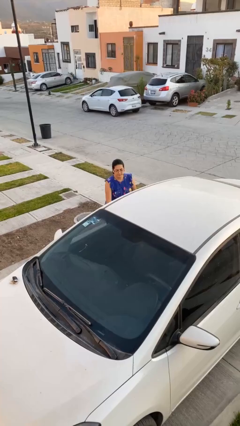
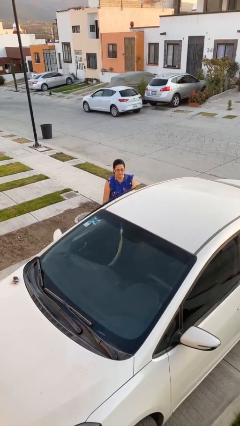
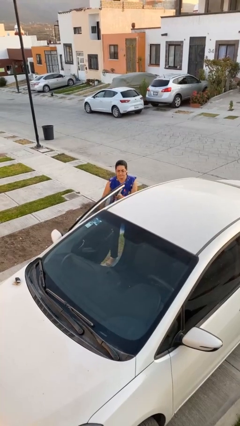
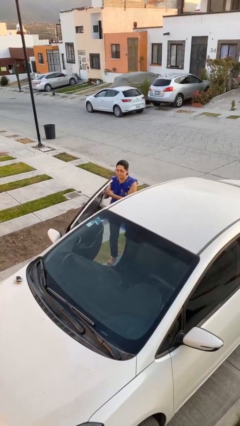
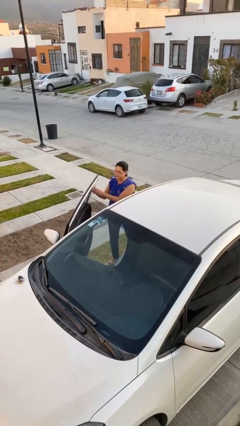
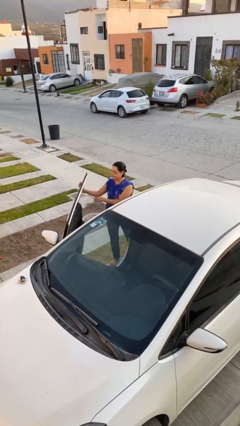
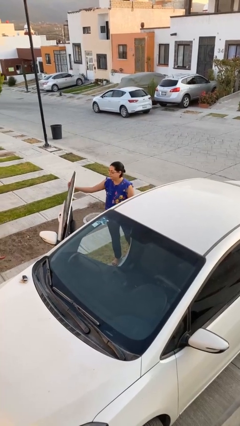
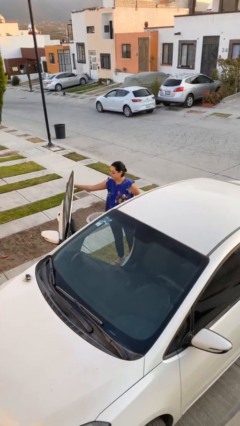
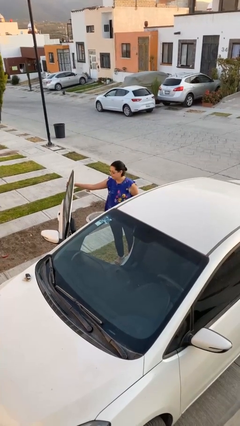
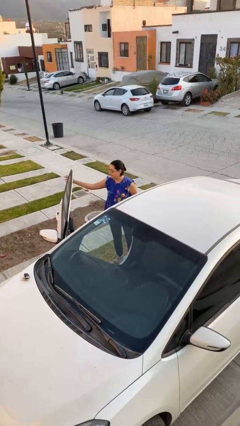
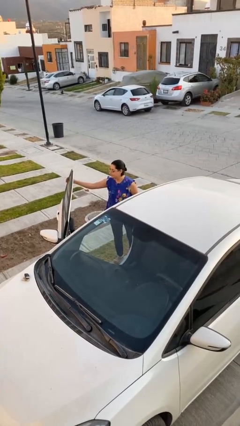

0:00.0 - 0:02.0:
person opens car door

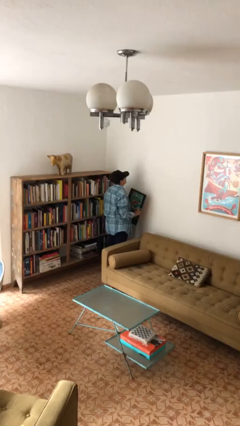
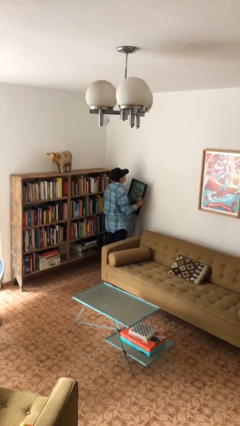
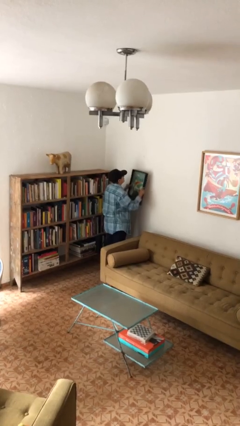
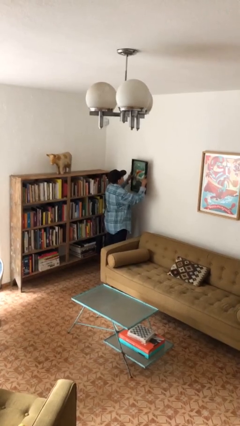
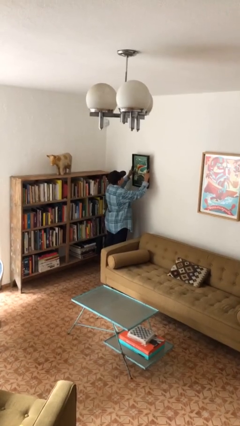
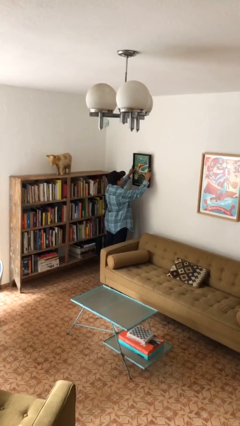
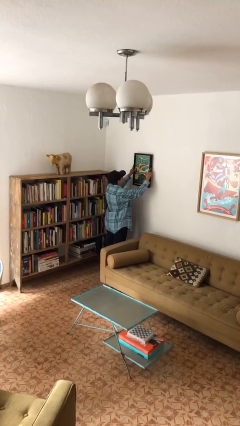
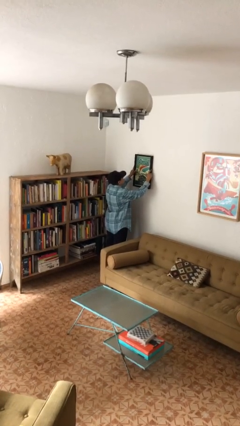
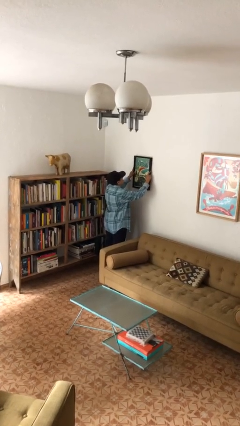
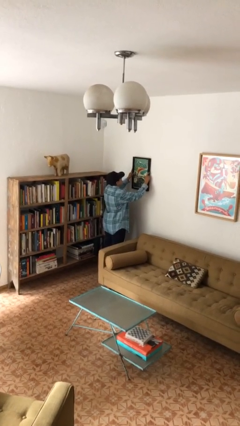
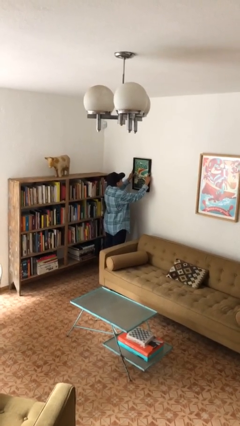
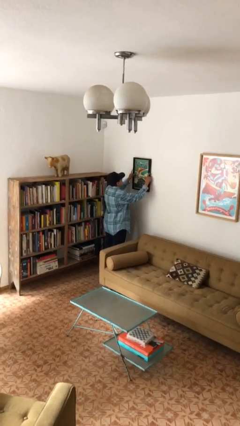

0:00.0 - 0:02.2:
person puts up picture frame

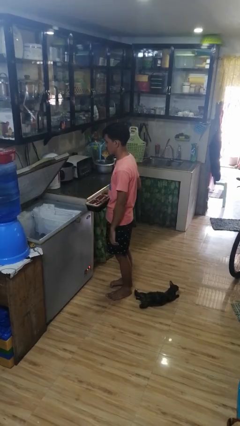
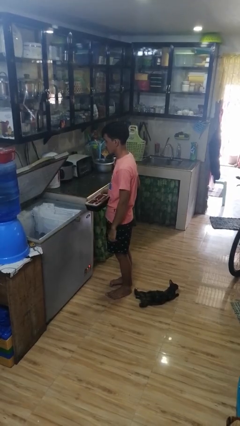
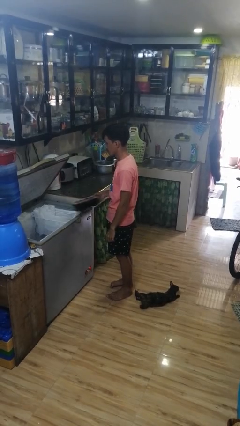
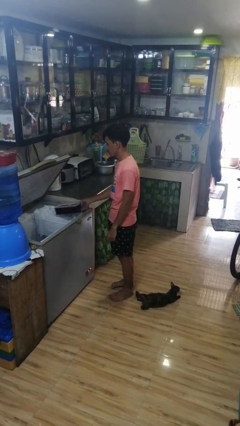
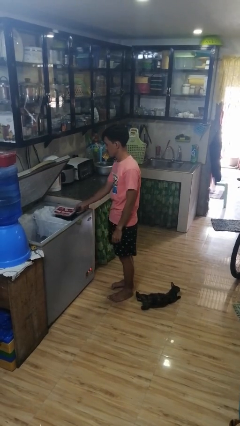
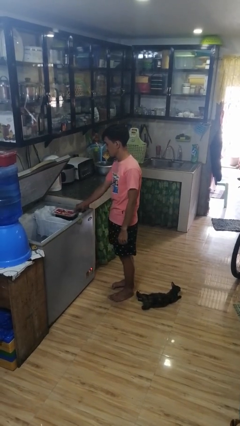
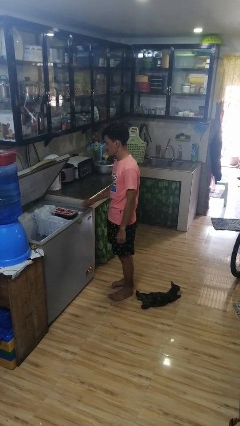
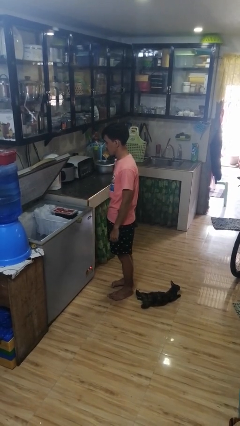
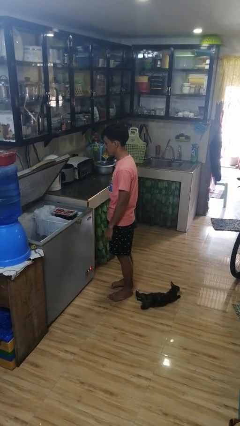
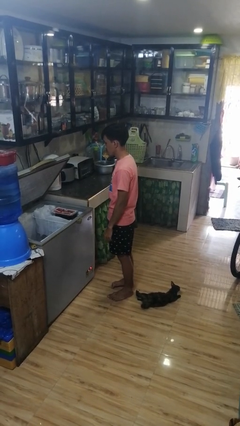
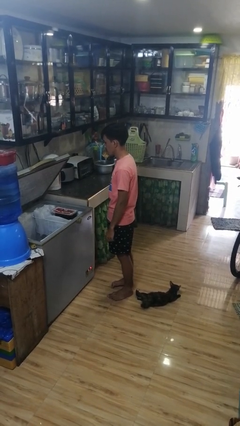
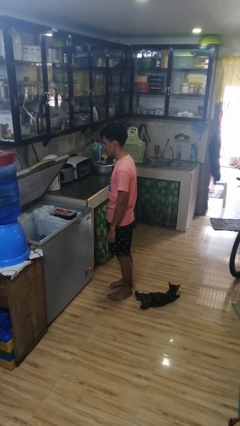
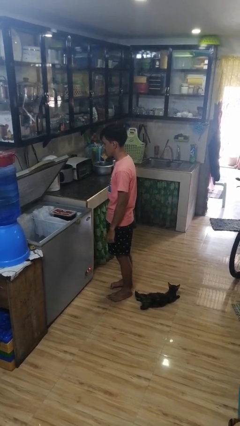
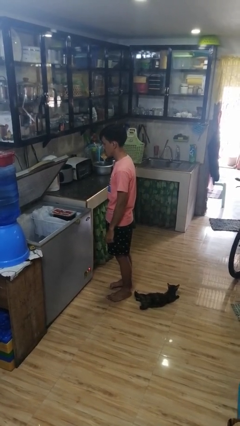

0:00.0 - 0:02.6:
person puts object into refrigerator

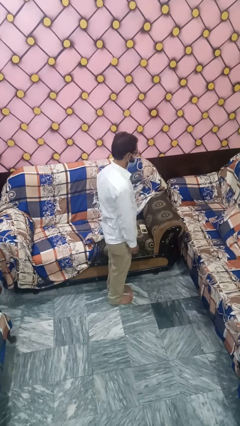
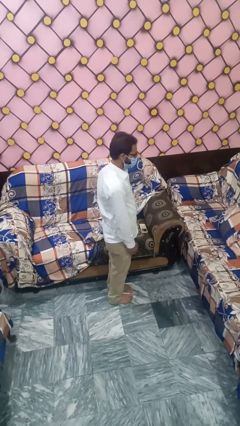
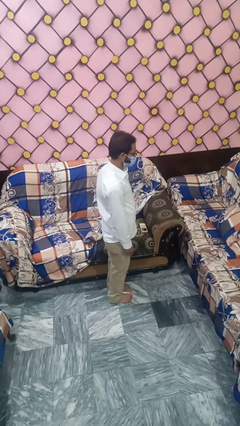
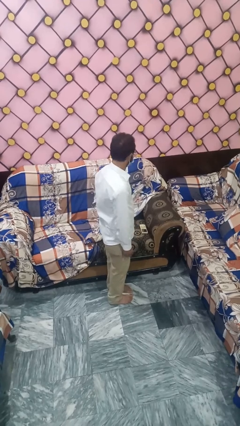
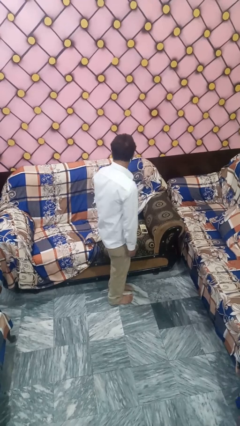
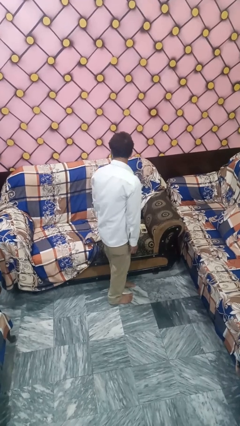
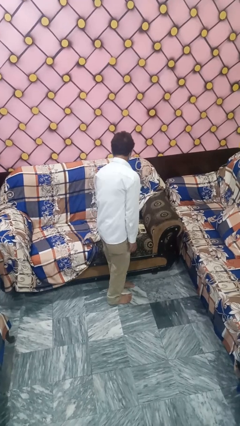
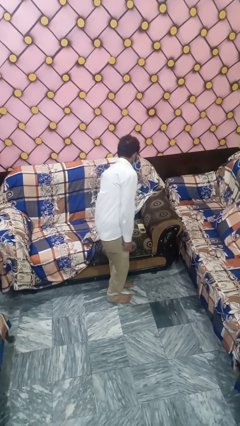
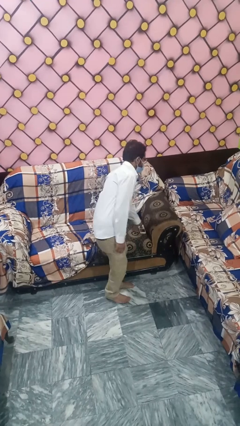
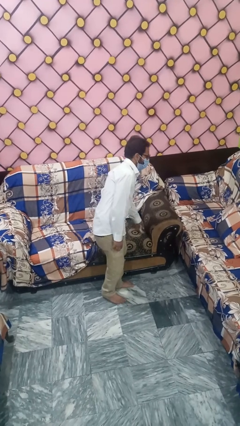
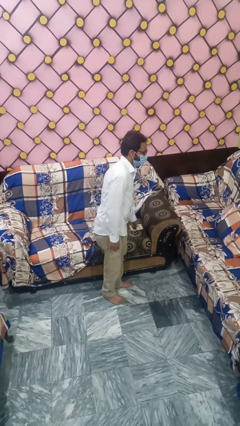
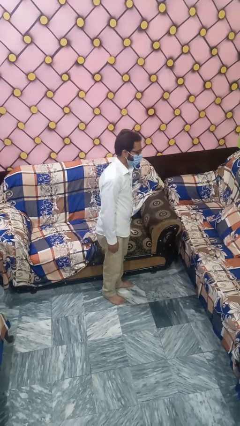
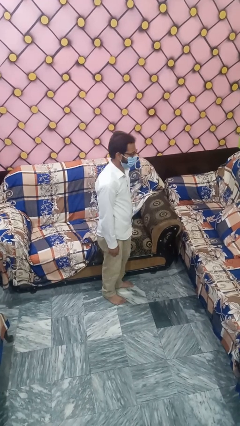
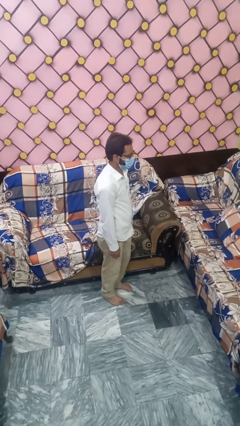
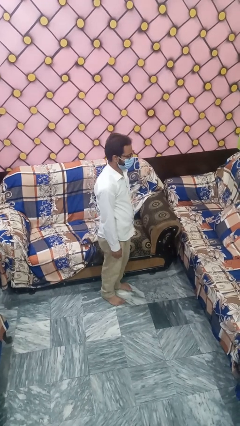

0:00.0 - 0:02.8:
person searches under couch

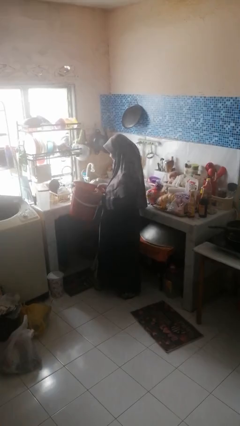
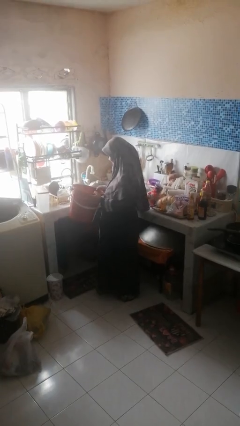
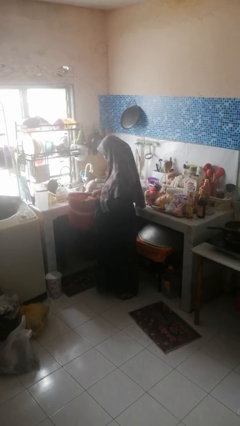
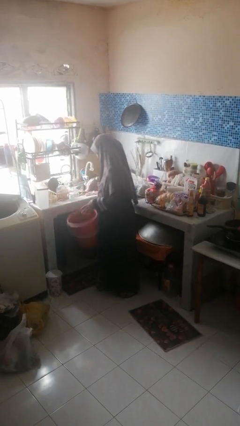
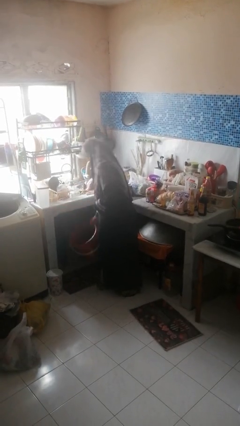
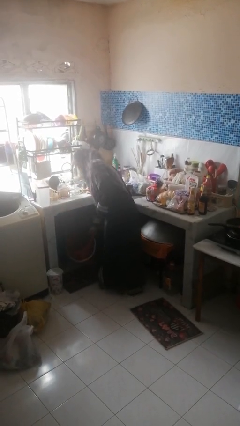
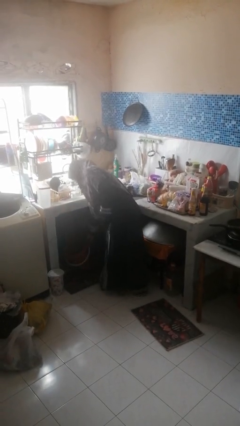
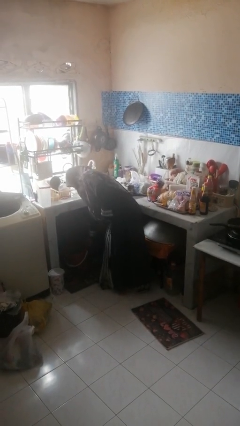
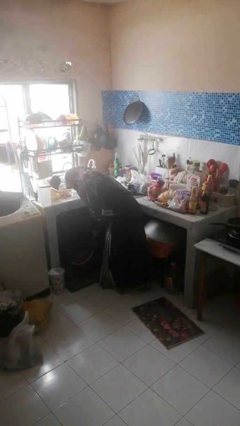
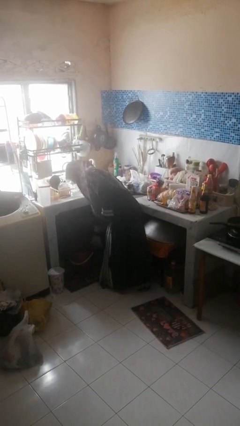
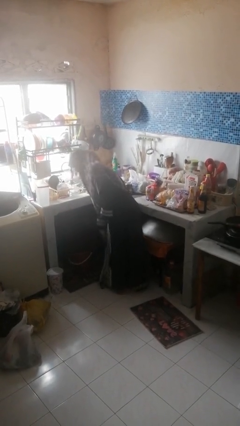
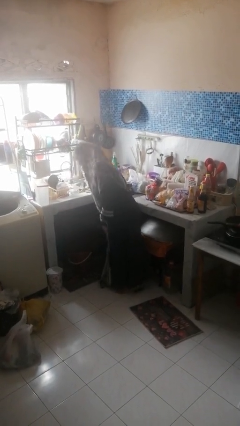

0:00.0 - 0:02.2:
person puts down object into cabinet

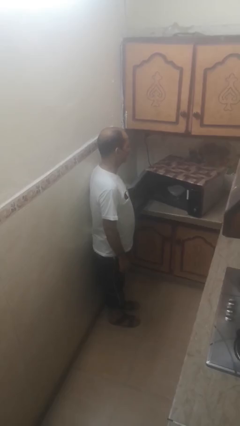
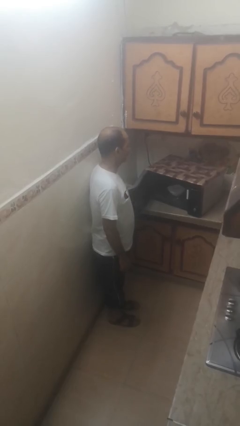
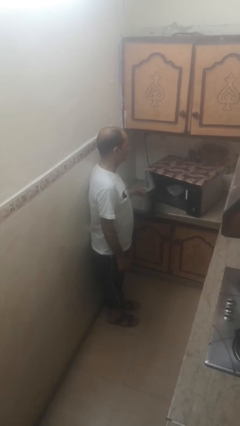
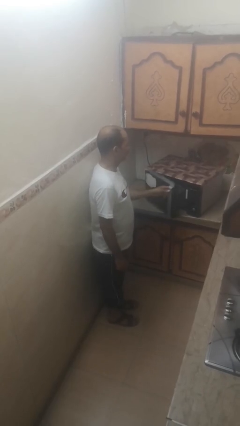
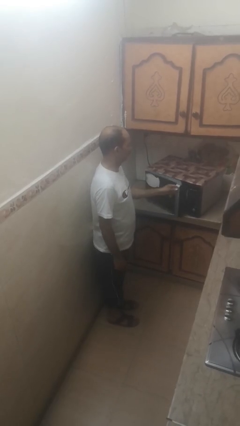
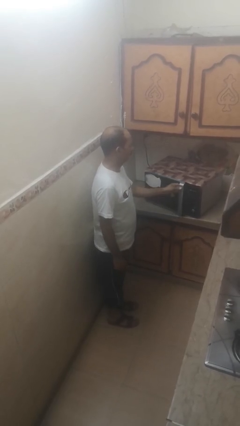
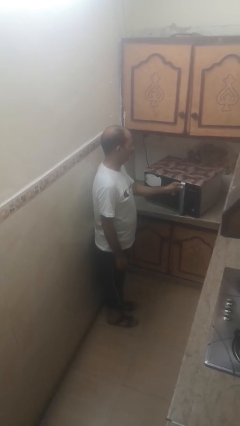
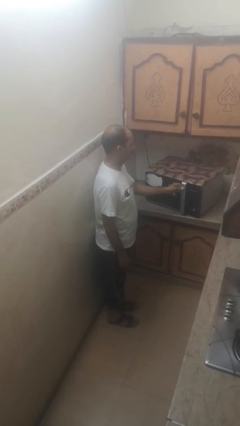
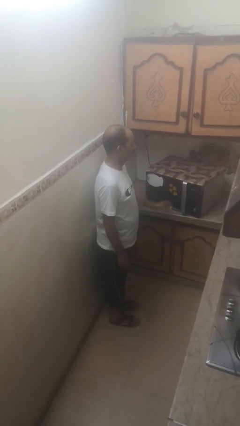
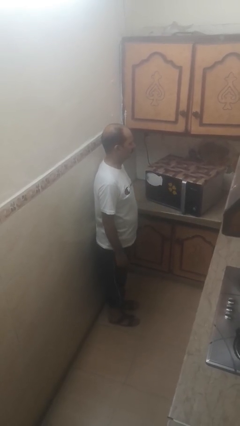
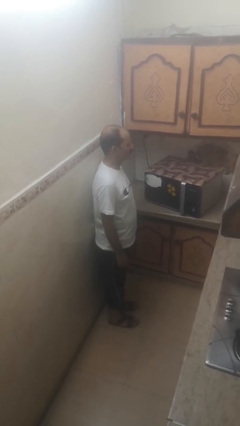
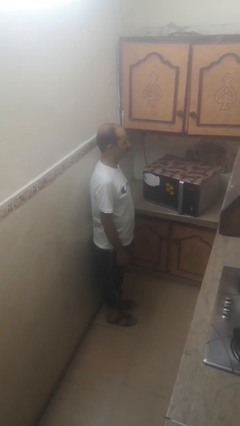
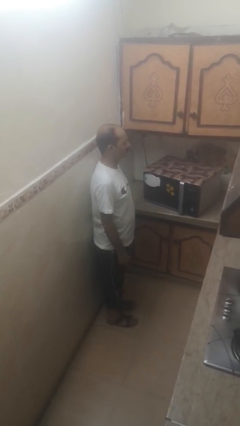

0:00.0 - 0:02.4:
person closes microwave

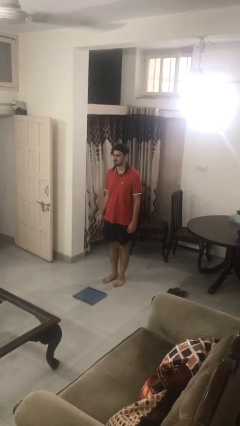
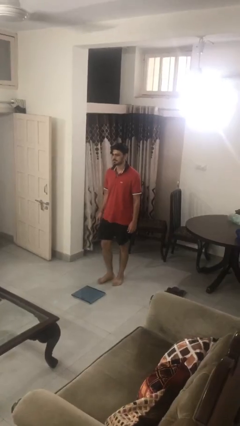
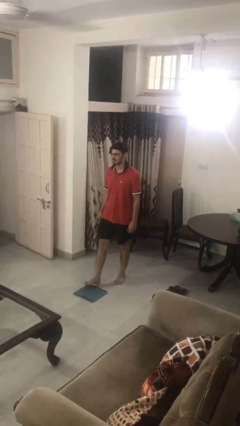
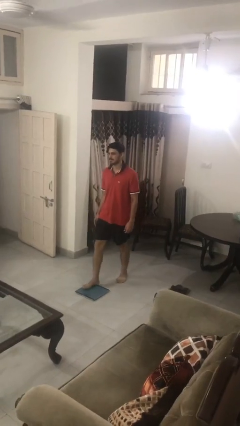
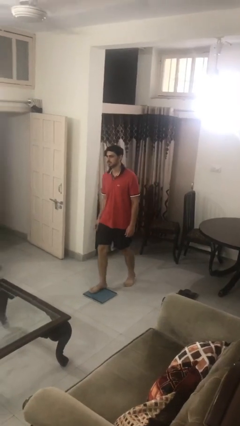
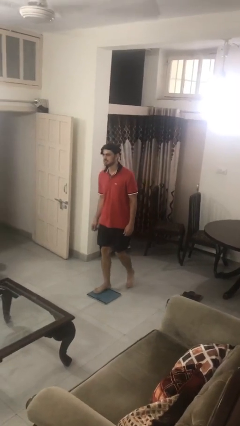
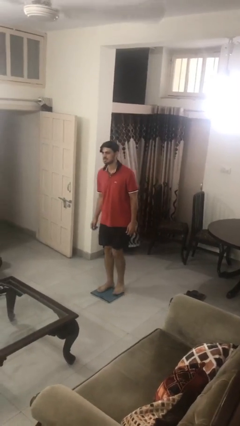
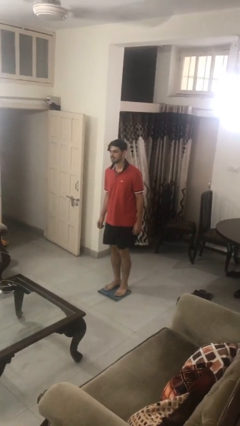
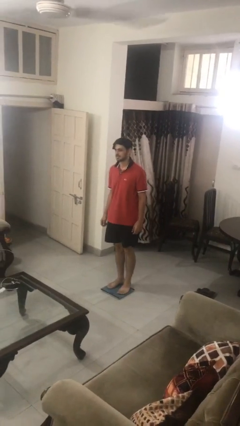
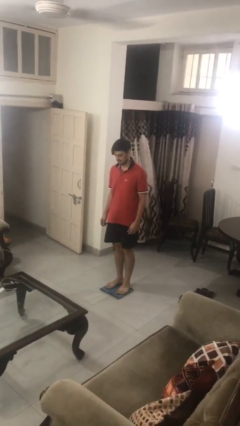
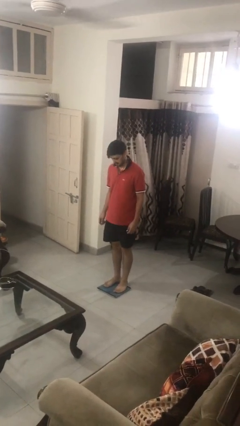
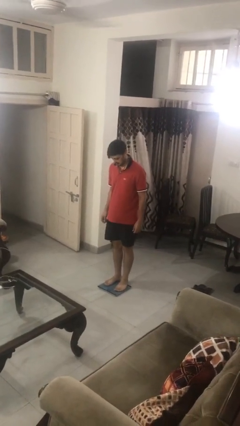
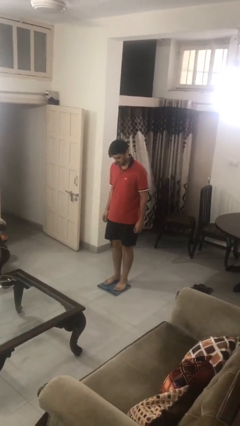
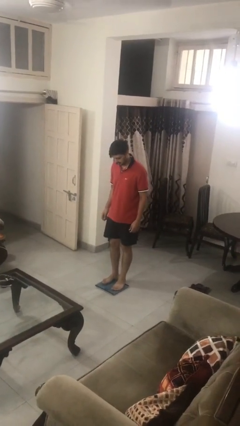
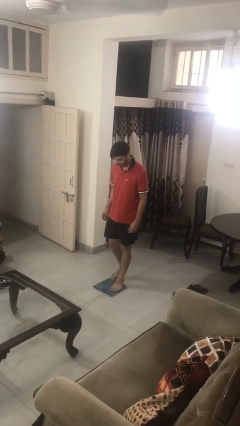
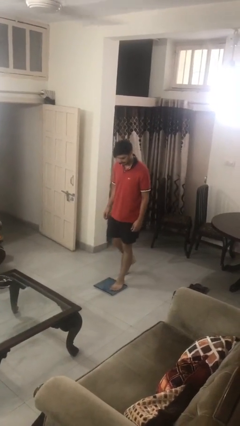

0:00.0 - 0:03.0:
person uses bodyweight scale
